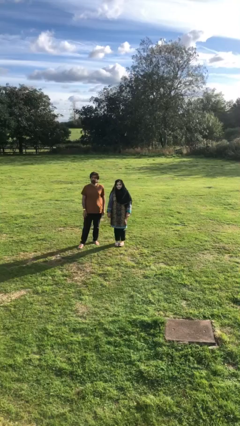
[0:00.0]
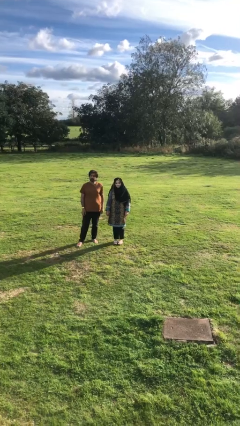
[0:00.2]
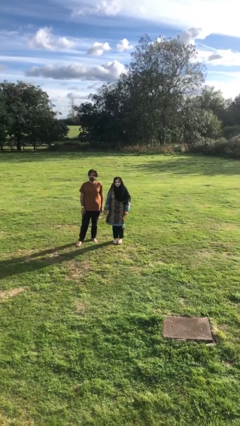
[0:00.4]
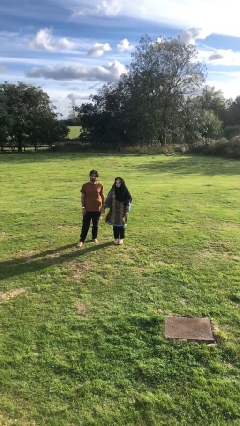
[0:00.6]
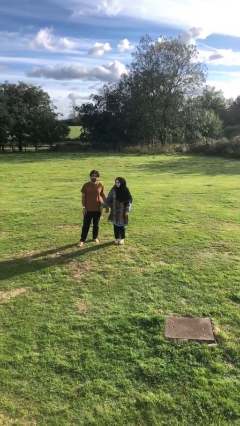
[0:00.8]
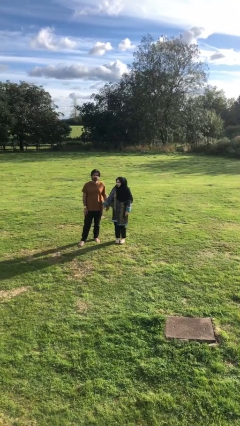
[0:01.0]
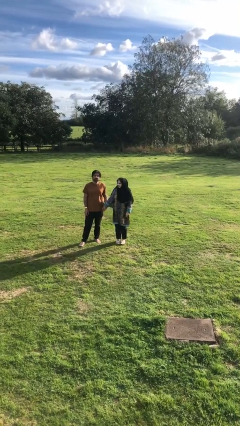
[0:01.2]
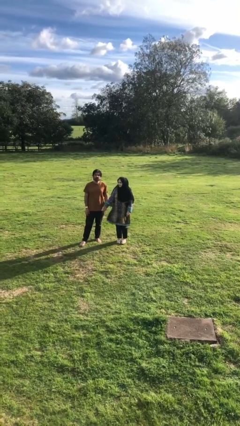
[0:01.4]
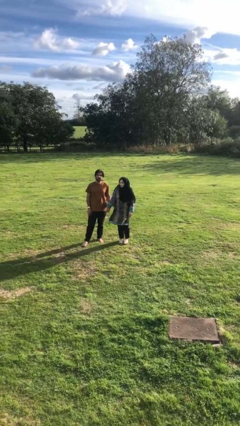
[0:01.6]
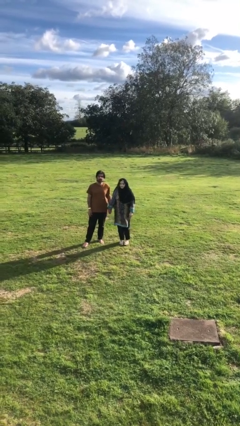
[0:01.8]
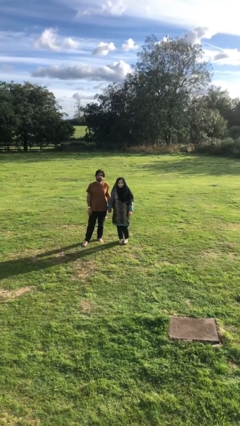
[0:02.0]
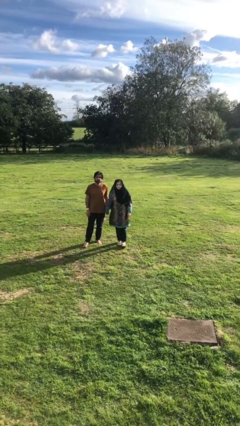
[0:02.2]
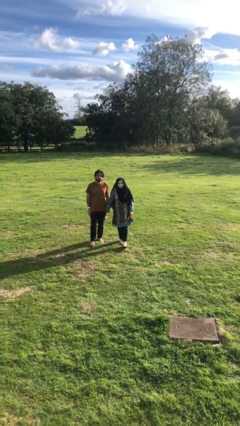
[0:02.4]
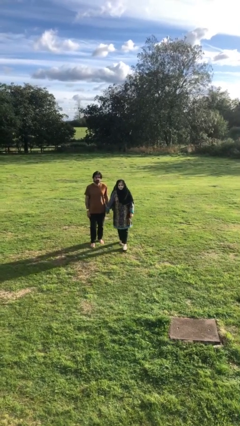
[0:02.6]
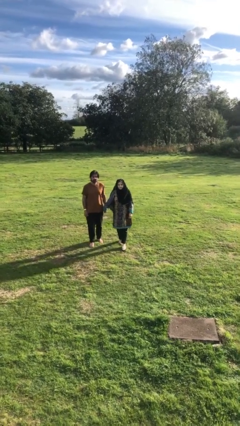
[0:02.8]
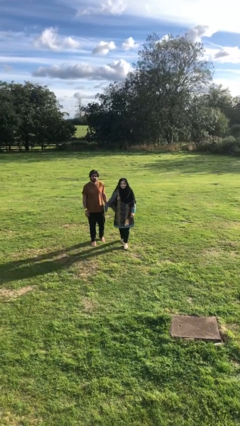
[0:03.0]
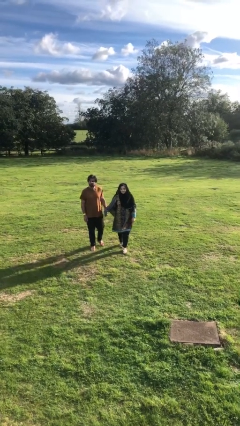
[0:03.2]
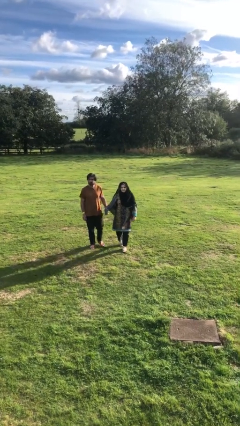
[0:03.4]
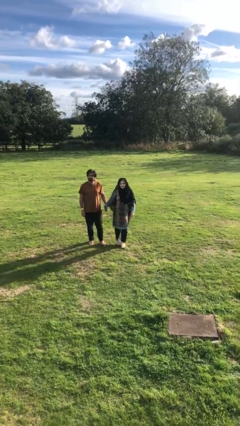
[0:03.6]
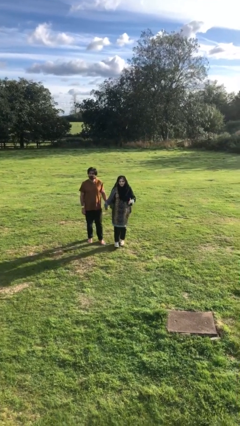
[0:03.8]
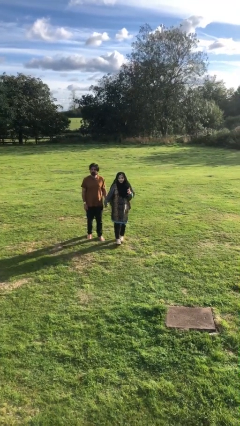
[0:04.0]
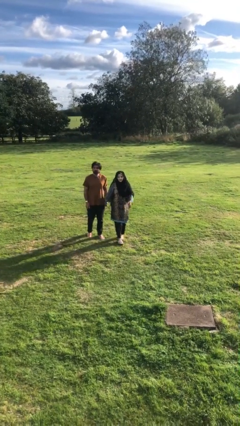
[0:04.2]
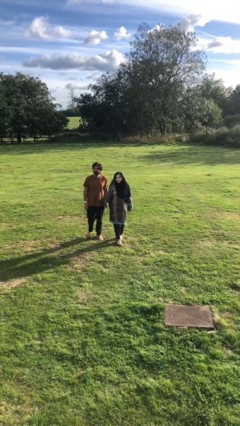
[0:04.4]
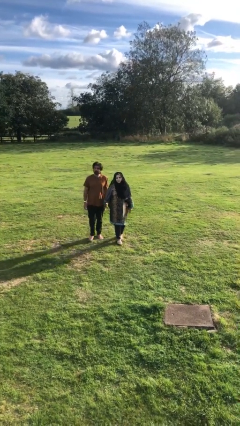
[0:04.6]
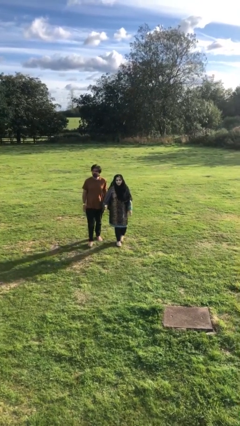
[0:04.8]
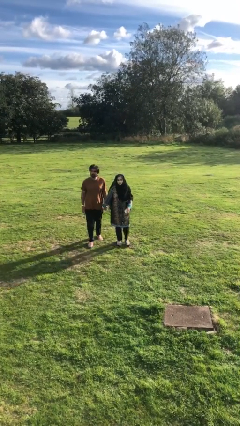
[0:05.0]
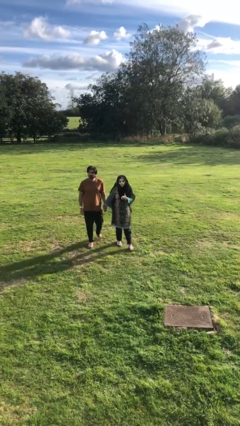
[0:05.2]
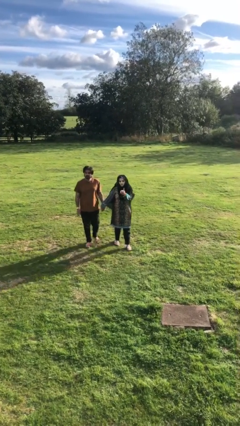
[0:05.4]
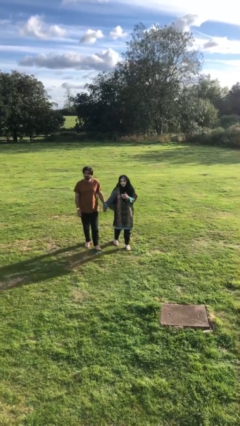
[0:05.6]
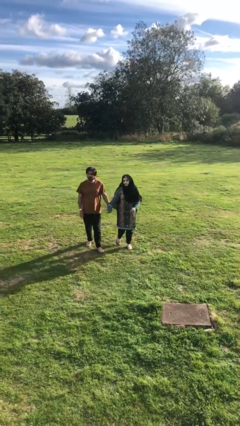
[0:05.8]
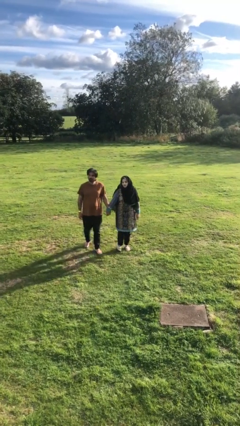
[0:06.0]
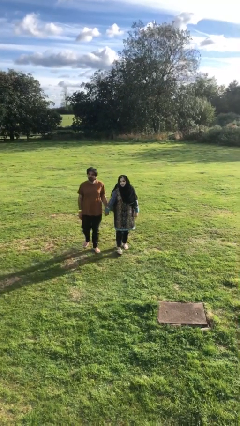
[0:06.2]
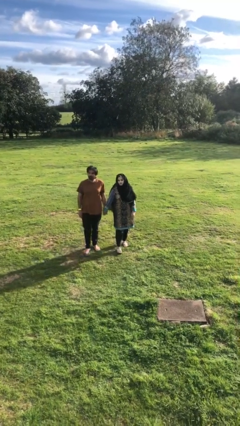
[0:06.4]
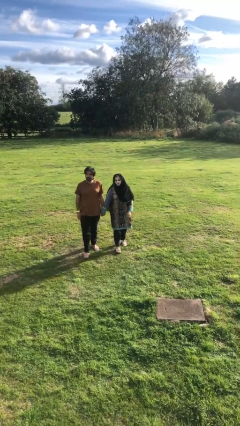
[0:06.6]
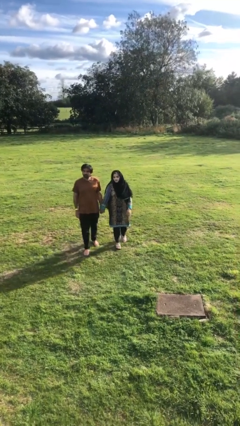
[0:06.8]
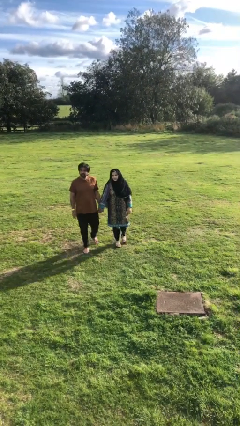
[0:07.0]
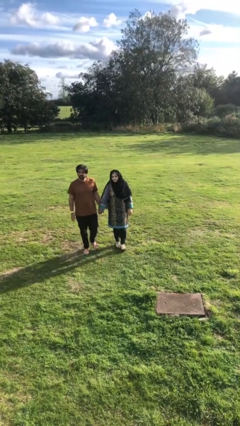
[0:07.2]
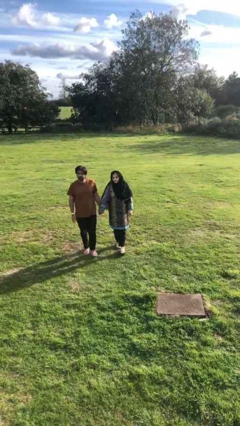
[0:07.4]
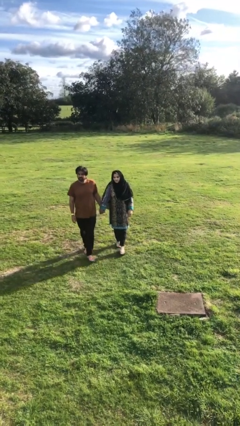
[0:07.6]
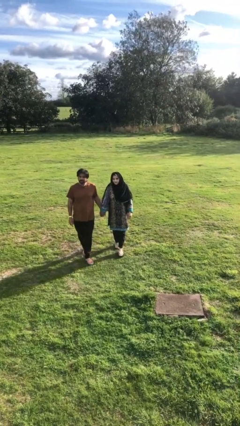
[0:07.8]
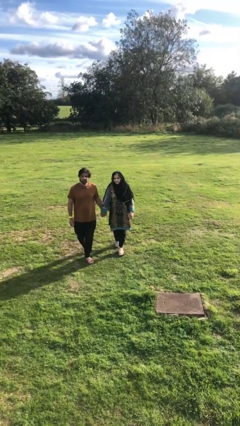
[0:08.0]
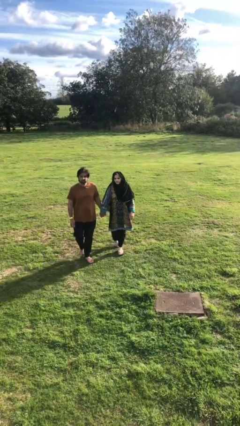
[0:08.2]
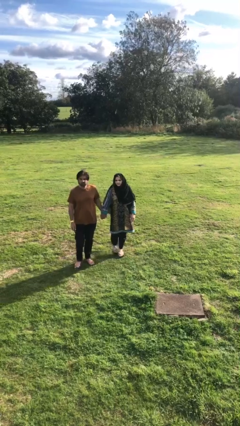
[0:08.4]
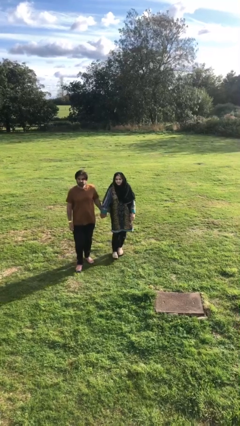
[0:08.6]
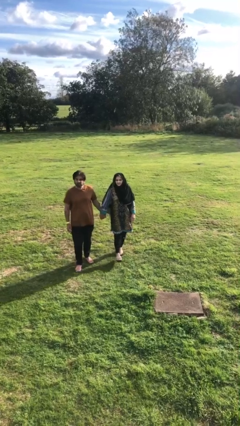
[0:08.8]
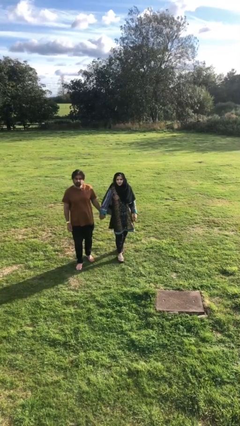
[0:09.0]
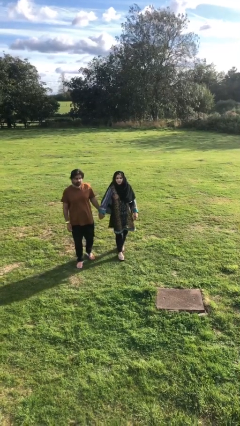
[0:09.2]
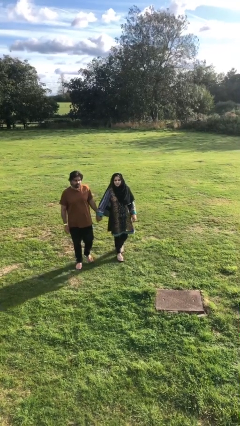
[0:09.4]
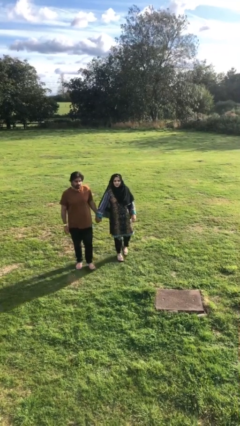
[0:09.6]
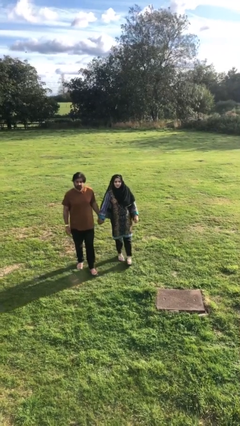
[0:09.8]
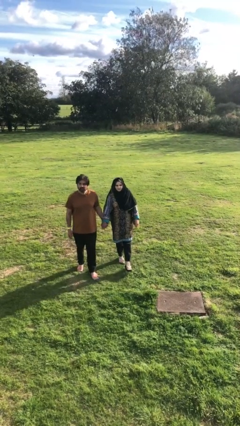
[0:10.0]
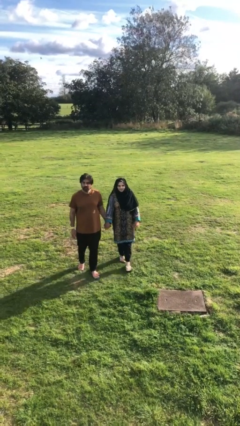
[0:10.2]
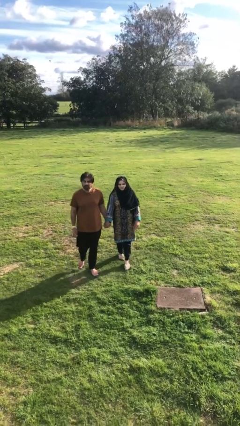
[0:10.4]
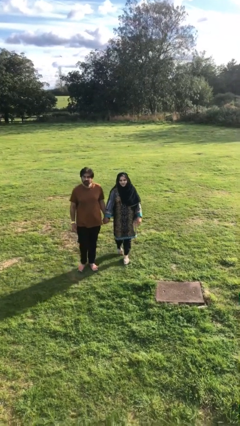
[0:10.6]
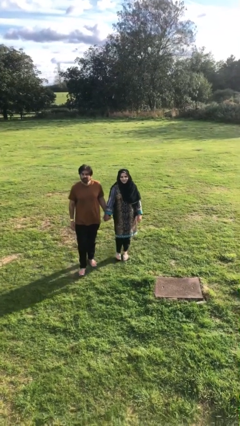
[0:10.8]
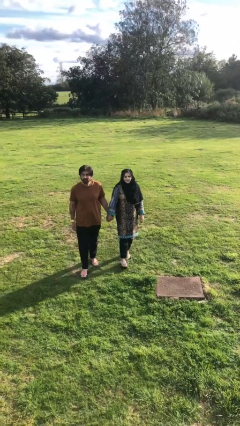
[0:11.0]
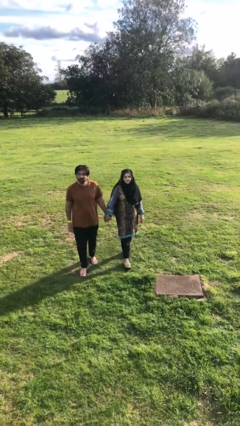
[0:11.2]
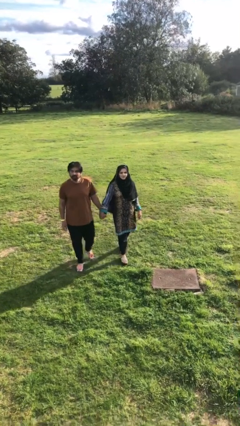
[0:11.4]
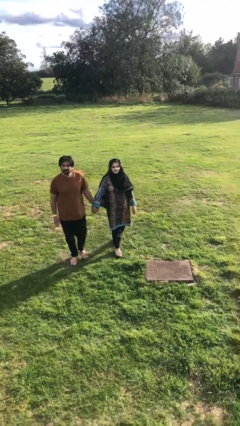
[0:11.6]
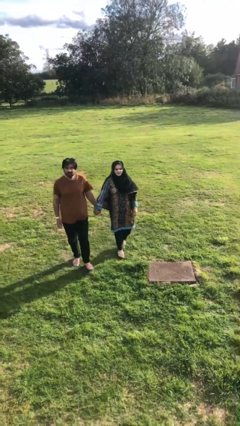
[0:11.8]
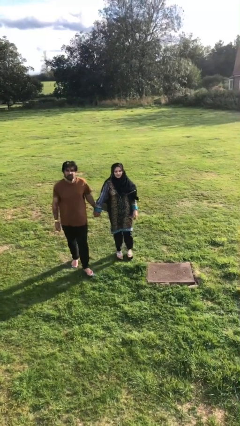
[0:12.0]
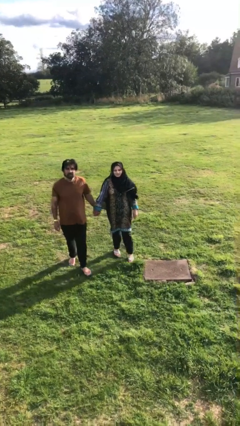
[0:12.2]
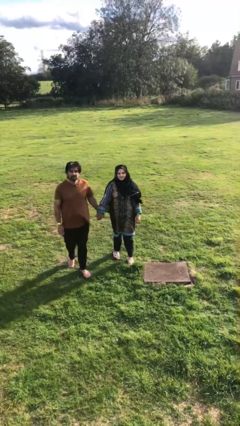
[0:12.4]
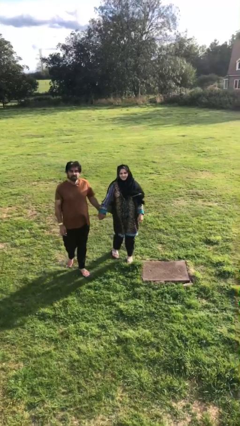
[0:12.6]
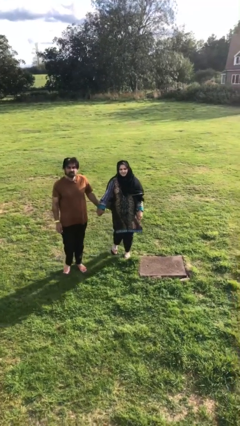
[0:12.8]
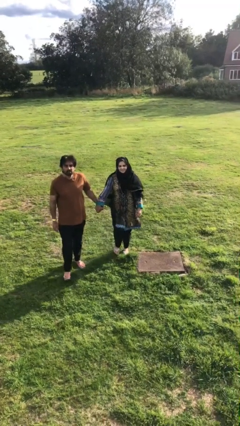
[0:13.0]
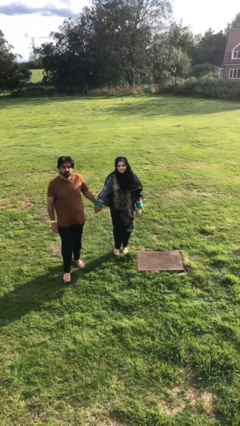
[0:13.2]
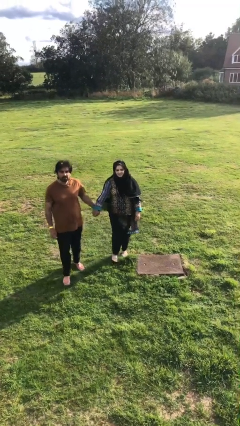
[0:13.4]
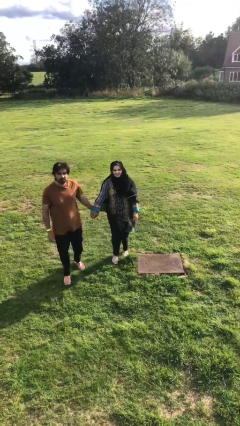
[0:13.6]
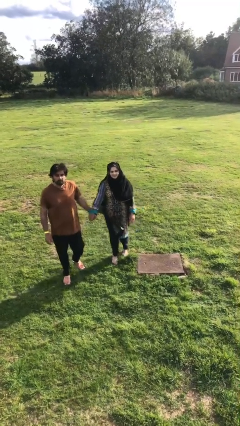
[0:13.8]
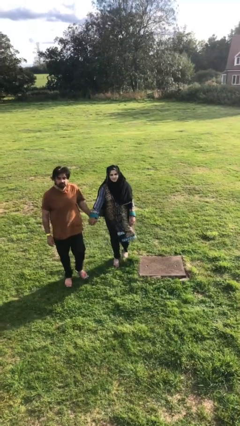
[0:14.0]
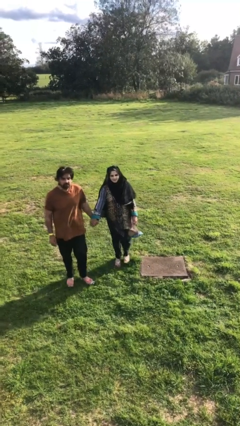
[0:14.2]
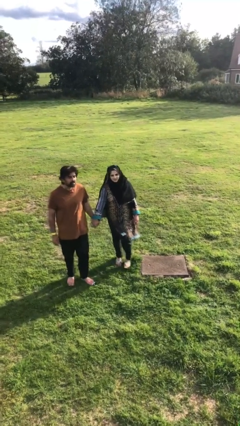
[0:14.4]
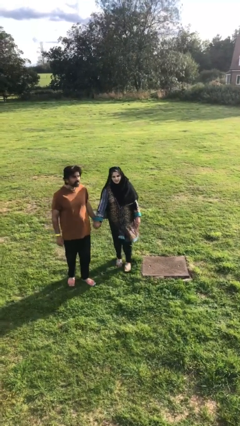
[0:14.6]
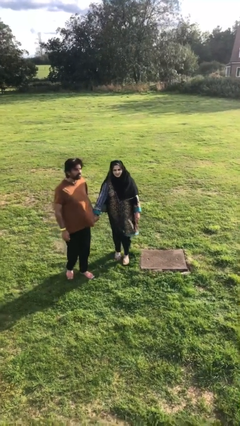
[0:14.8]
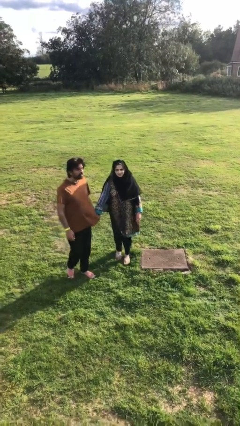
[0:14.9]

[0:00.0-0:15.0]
person holds hand

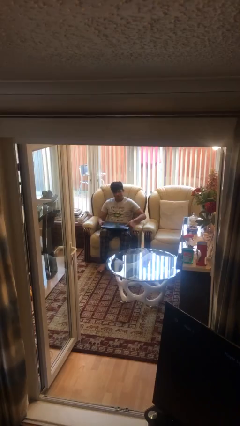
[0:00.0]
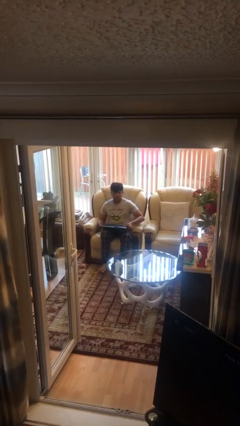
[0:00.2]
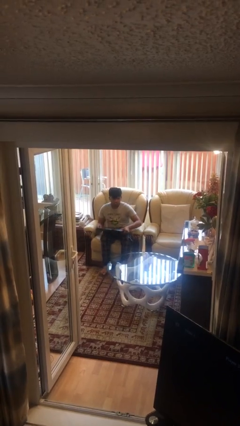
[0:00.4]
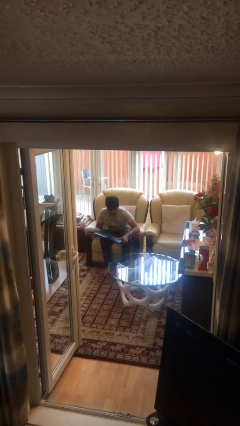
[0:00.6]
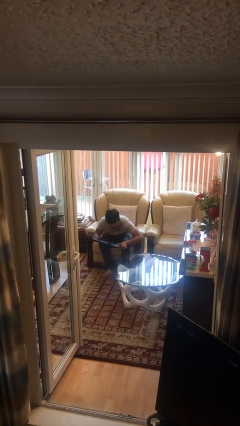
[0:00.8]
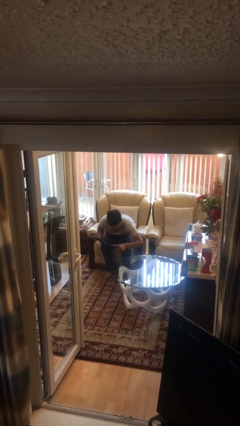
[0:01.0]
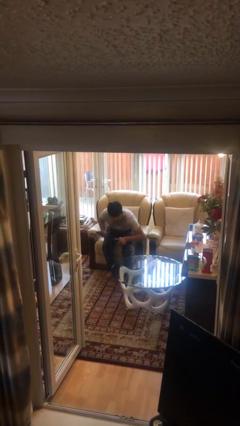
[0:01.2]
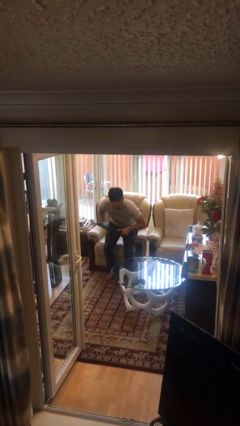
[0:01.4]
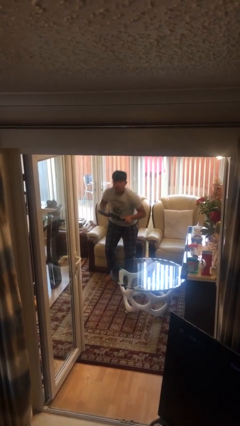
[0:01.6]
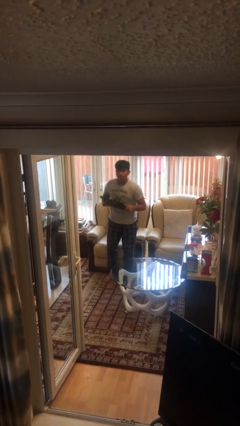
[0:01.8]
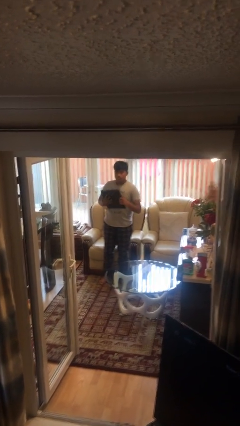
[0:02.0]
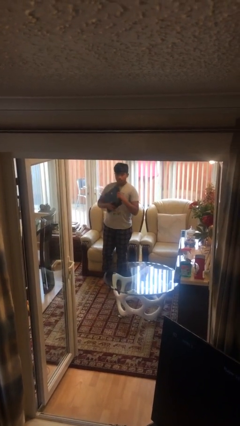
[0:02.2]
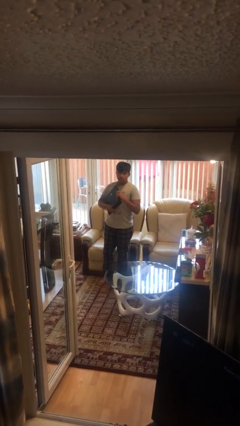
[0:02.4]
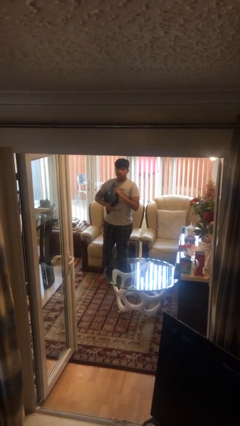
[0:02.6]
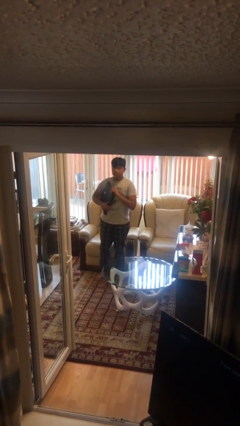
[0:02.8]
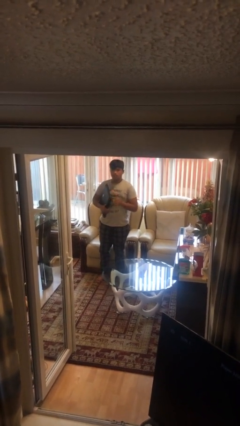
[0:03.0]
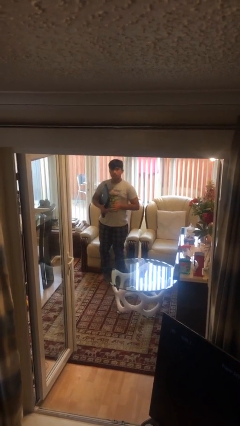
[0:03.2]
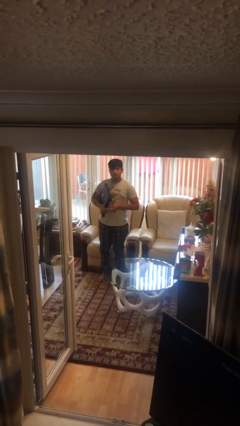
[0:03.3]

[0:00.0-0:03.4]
person stands up
